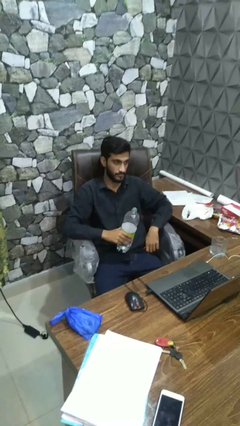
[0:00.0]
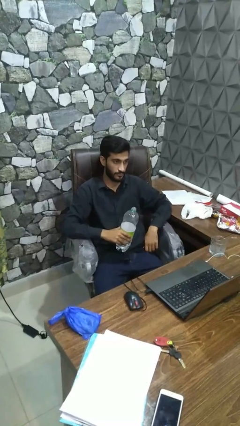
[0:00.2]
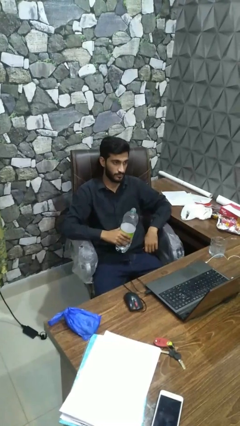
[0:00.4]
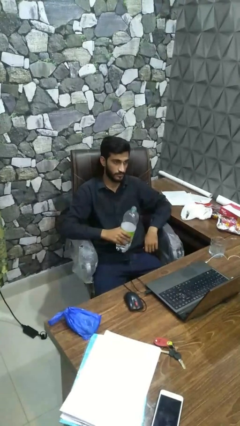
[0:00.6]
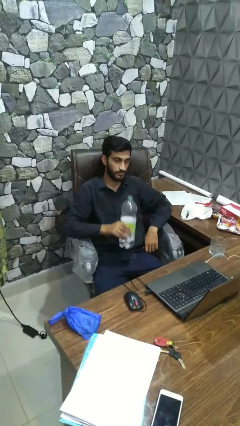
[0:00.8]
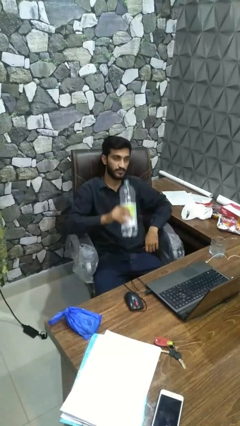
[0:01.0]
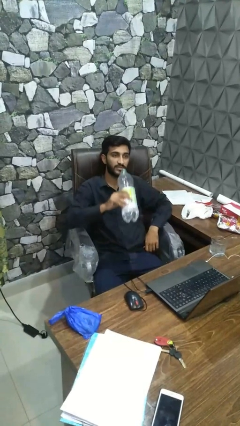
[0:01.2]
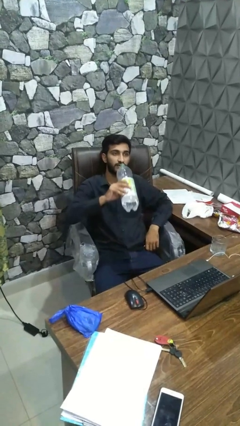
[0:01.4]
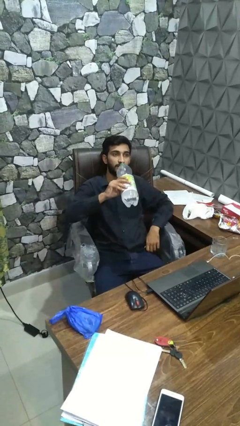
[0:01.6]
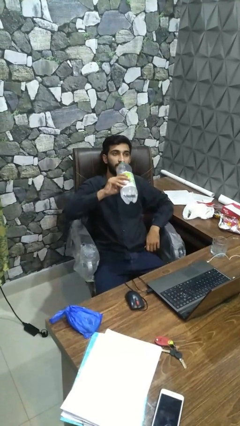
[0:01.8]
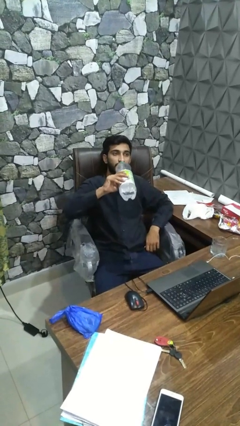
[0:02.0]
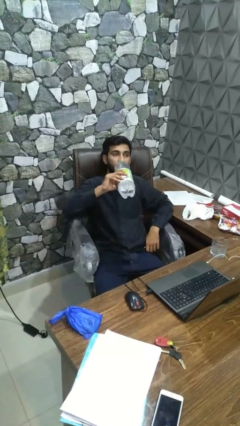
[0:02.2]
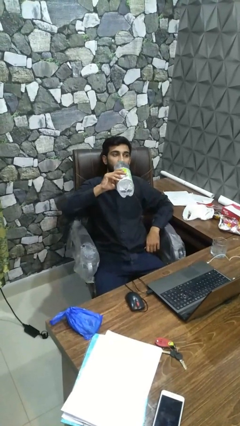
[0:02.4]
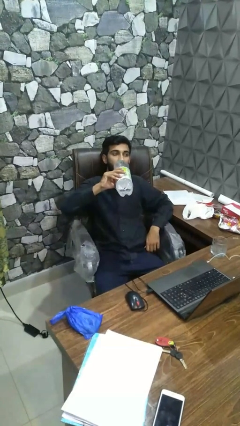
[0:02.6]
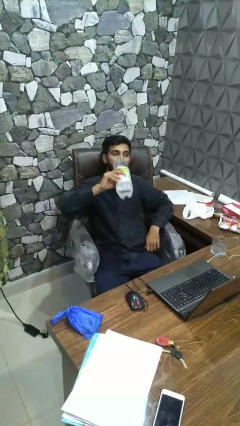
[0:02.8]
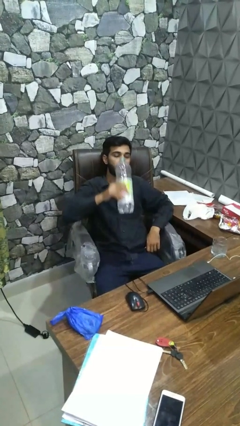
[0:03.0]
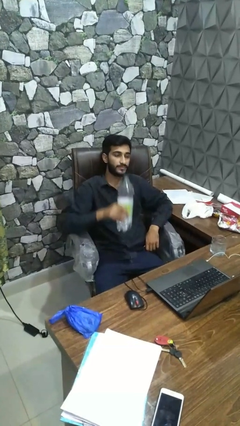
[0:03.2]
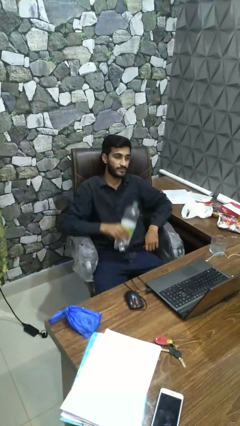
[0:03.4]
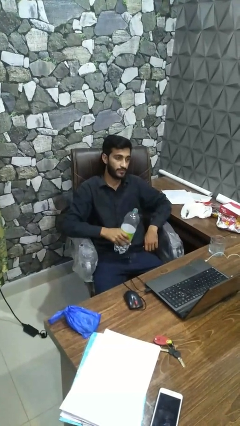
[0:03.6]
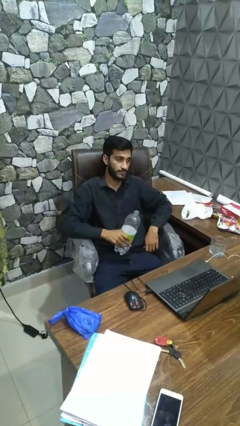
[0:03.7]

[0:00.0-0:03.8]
person drinks from bottle

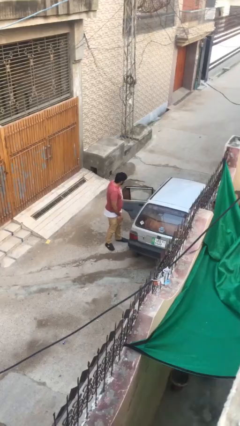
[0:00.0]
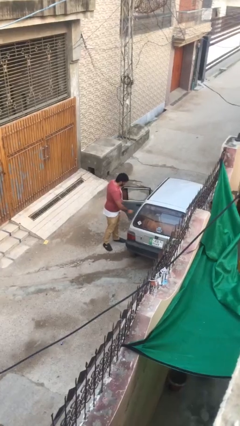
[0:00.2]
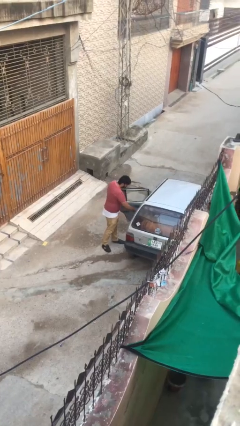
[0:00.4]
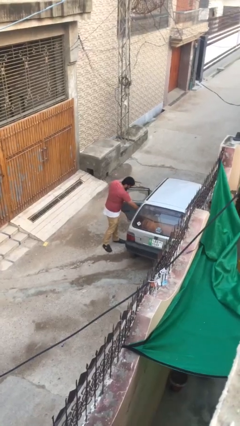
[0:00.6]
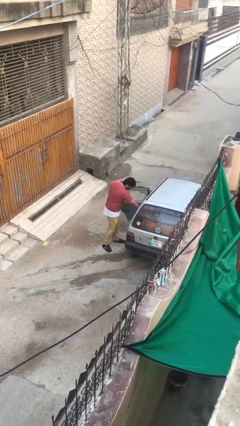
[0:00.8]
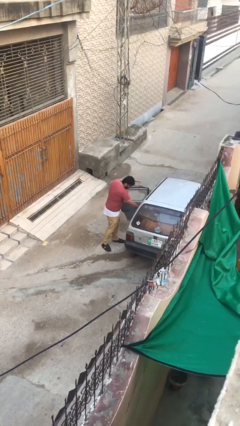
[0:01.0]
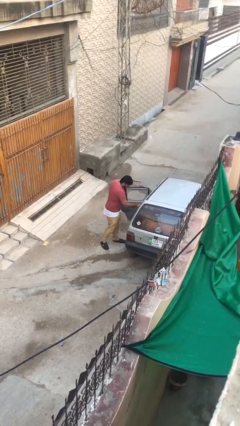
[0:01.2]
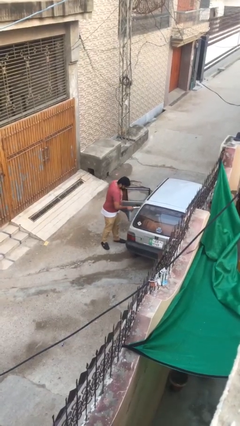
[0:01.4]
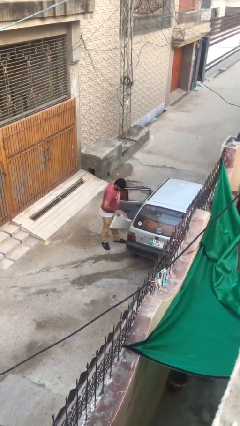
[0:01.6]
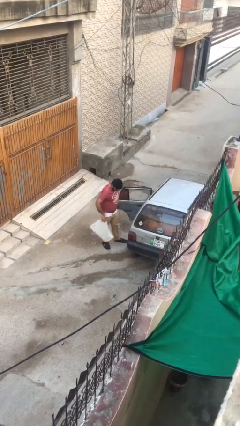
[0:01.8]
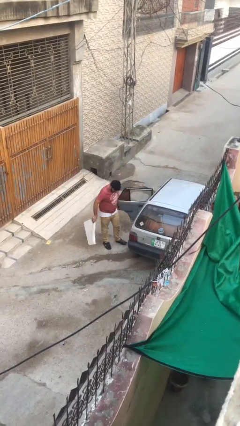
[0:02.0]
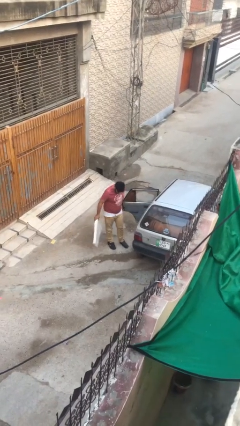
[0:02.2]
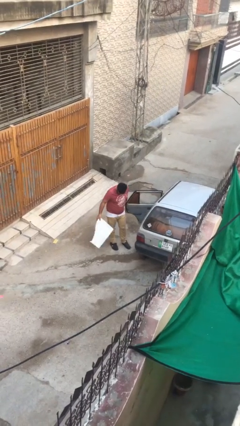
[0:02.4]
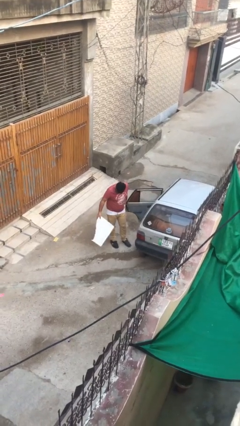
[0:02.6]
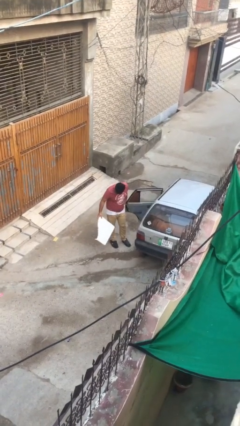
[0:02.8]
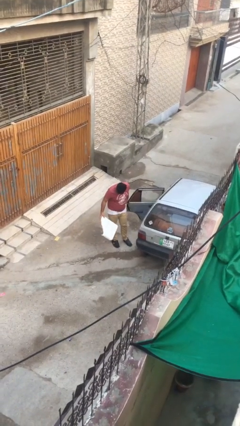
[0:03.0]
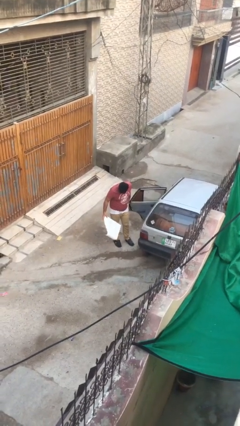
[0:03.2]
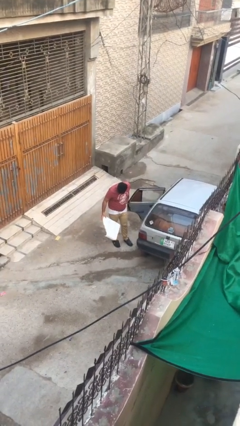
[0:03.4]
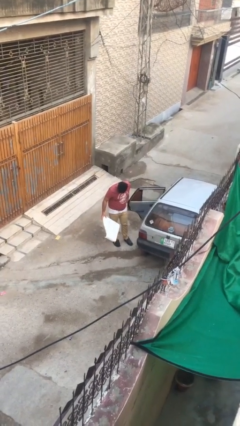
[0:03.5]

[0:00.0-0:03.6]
person unloads car

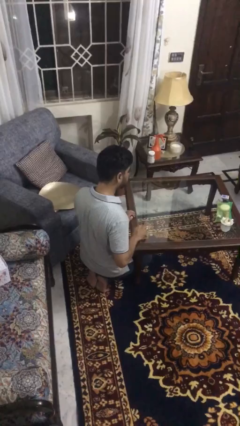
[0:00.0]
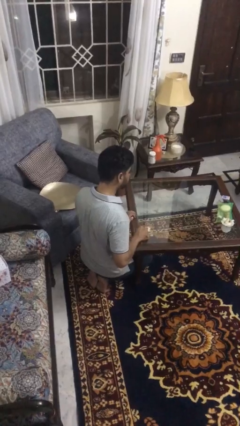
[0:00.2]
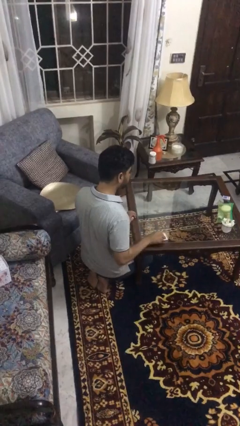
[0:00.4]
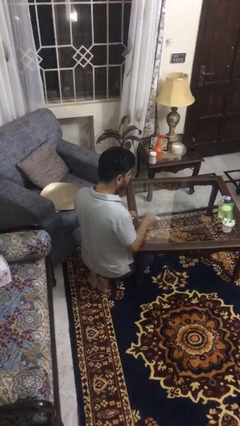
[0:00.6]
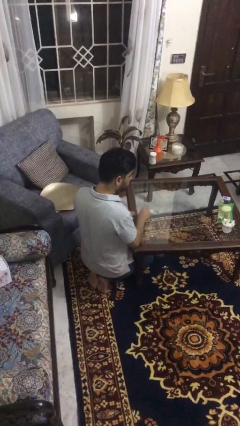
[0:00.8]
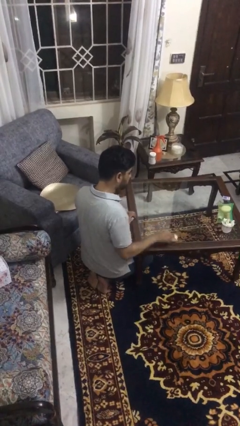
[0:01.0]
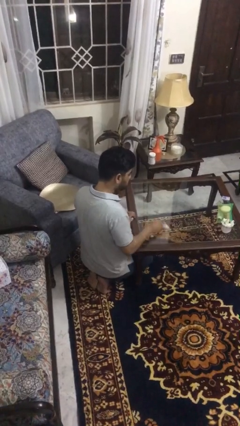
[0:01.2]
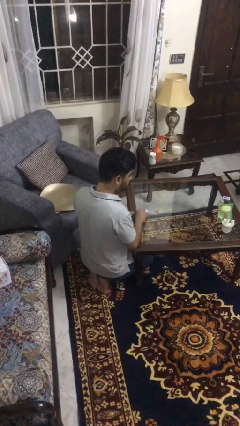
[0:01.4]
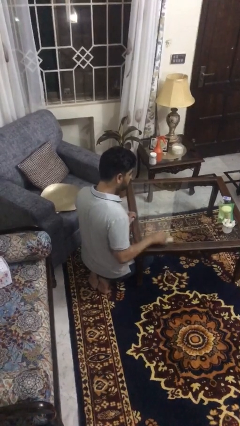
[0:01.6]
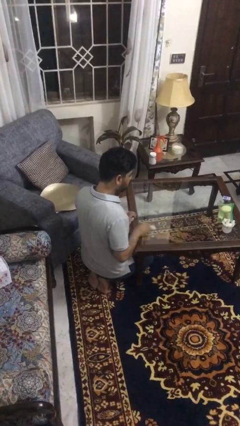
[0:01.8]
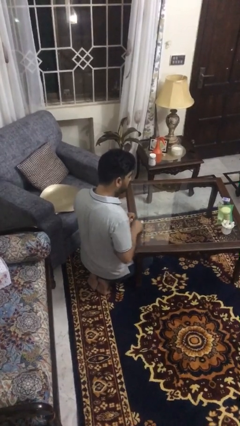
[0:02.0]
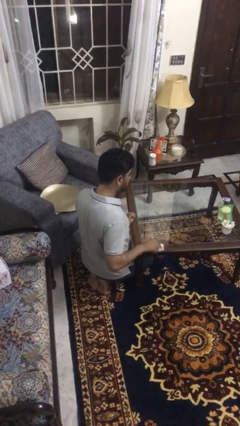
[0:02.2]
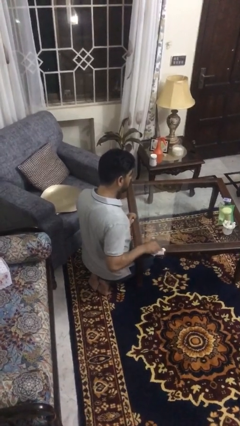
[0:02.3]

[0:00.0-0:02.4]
person cleans table with rag

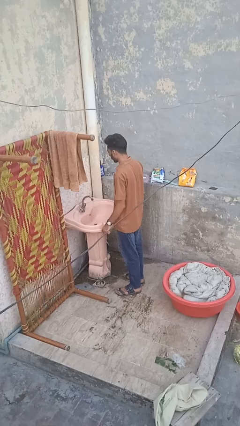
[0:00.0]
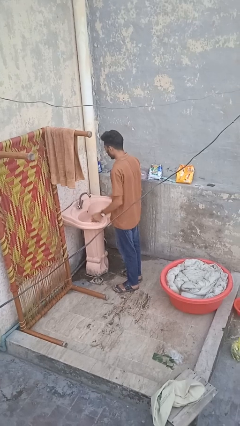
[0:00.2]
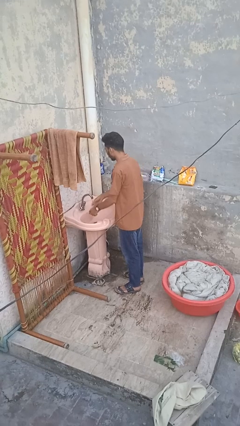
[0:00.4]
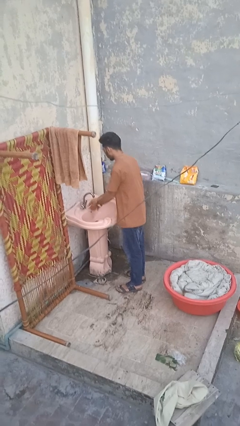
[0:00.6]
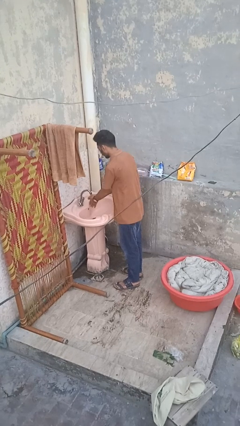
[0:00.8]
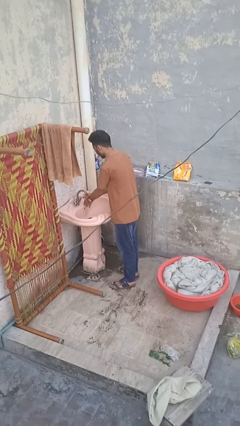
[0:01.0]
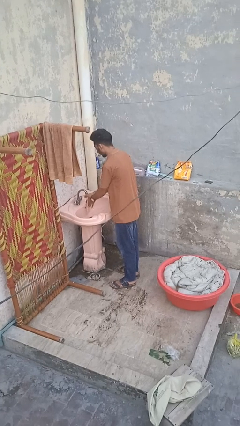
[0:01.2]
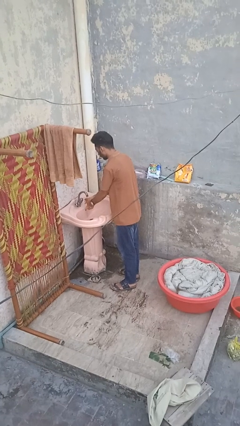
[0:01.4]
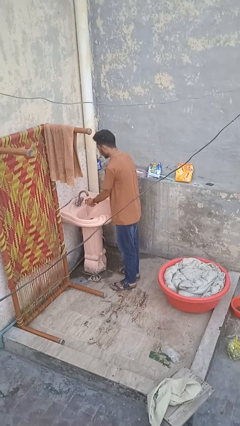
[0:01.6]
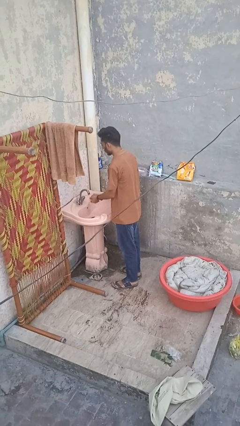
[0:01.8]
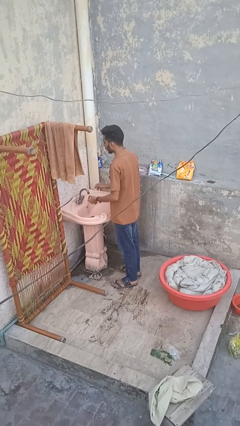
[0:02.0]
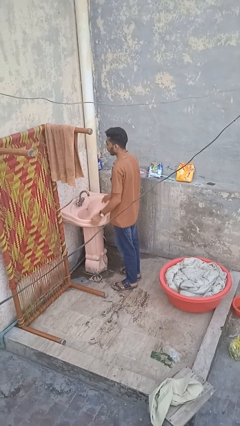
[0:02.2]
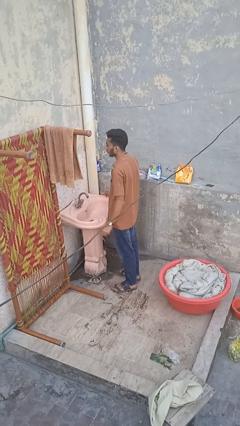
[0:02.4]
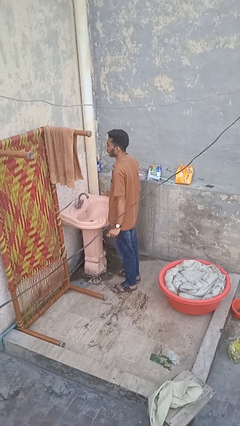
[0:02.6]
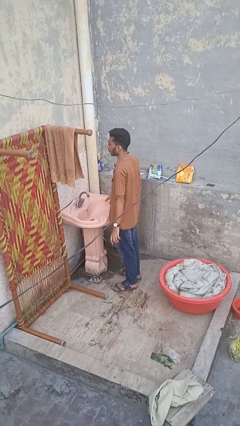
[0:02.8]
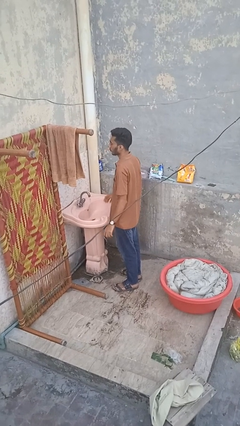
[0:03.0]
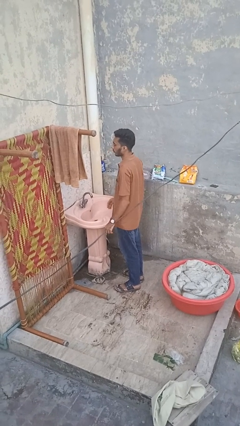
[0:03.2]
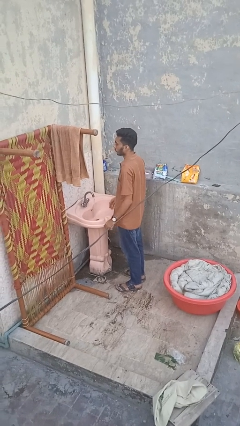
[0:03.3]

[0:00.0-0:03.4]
person washes hands

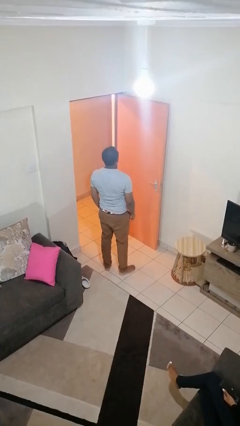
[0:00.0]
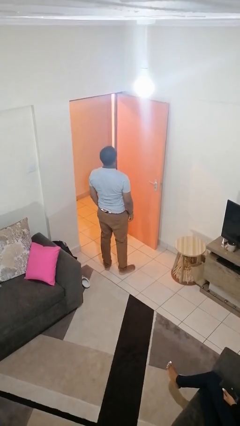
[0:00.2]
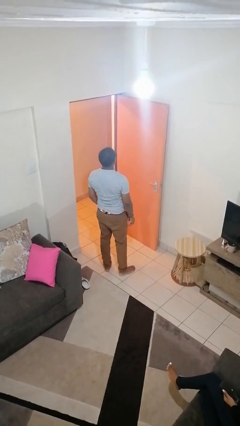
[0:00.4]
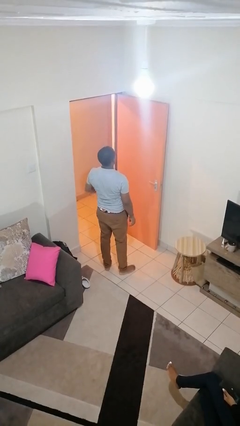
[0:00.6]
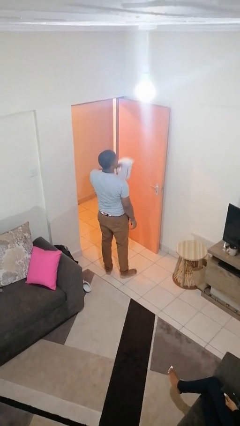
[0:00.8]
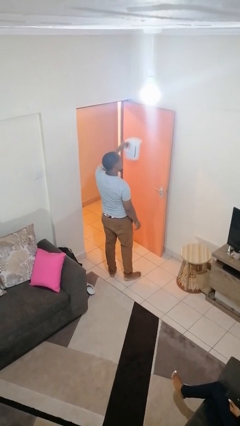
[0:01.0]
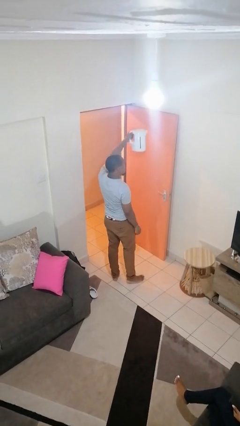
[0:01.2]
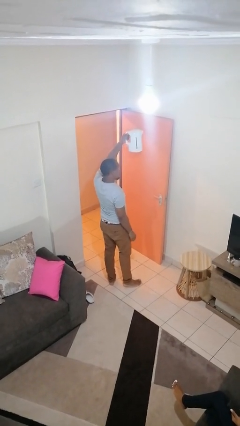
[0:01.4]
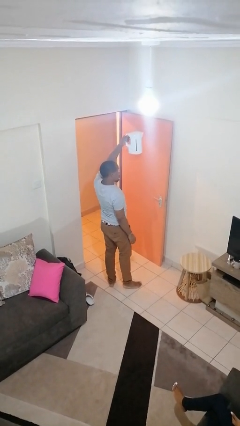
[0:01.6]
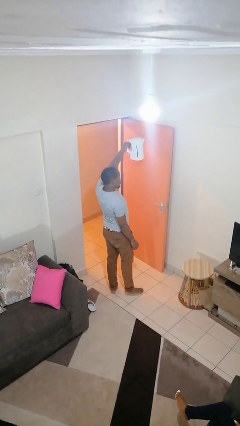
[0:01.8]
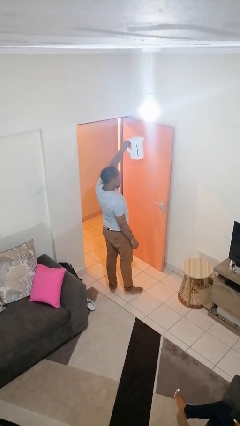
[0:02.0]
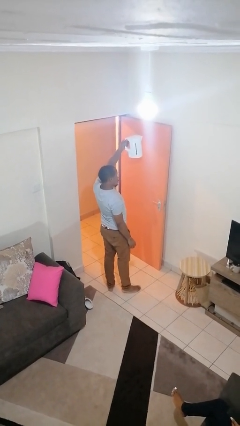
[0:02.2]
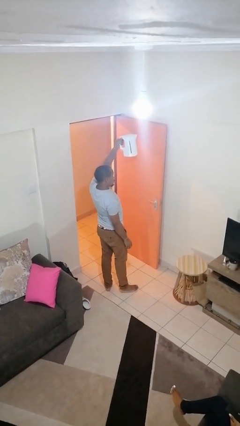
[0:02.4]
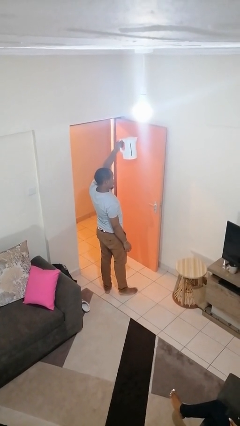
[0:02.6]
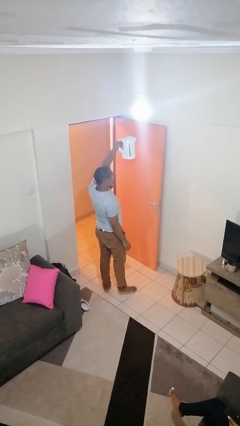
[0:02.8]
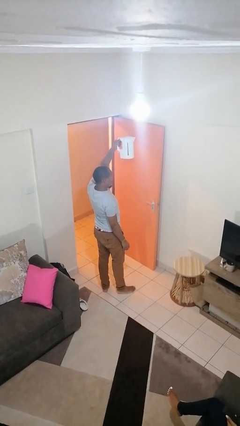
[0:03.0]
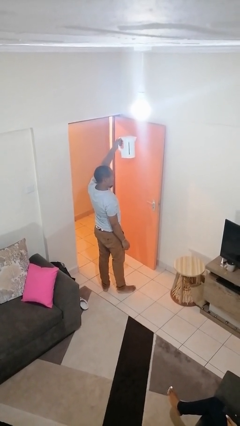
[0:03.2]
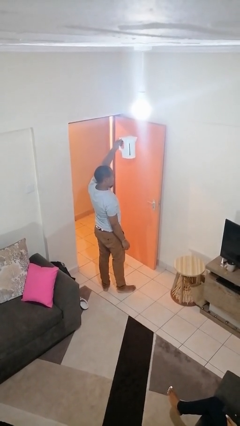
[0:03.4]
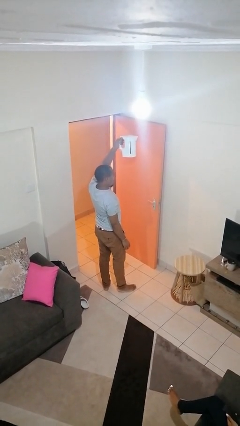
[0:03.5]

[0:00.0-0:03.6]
person holds object above head

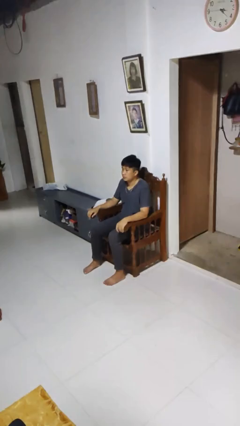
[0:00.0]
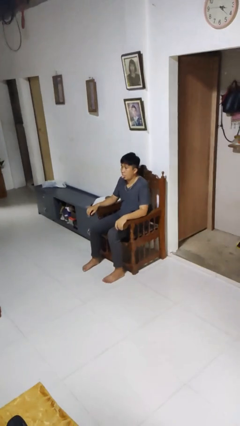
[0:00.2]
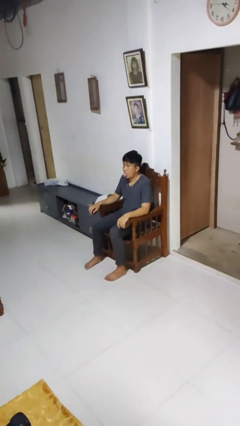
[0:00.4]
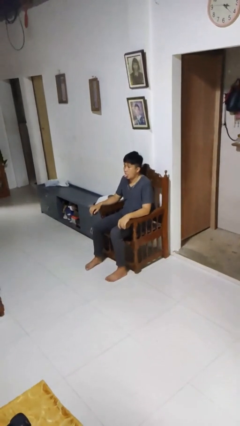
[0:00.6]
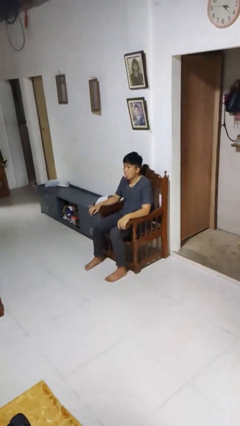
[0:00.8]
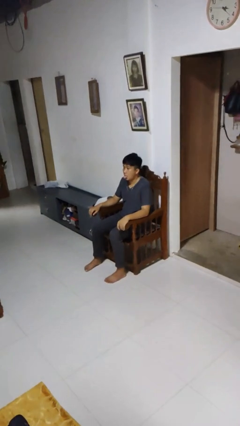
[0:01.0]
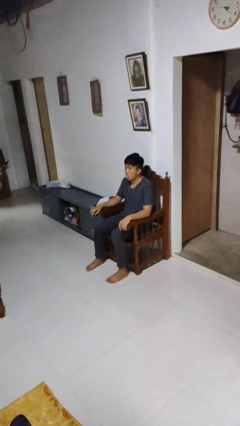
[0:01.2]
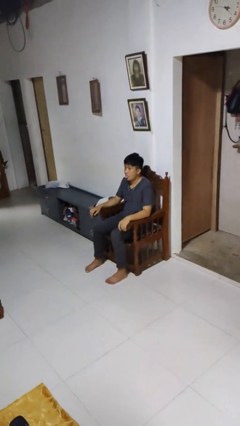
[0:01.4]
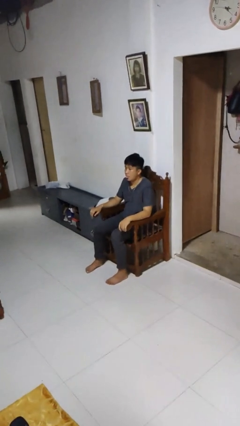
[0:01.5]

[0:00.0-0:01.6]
person sticks out tongue
